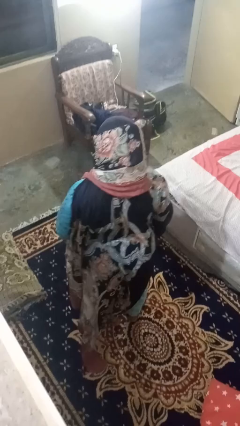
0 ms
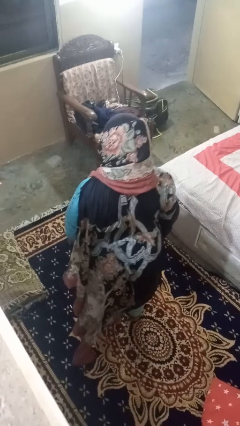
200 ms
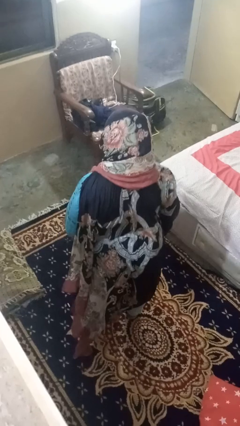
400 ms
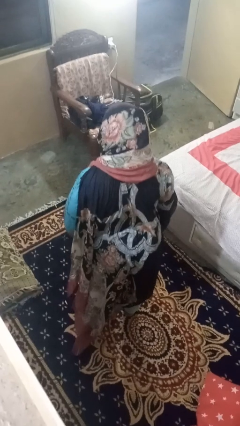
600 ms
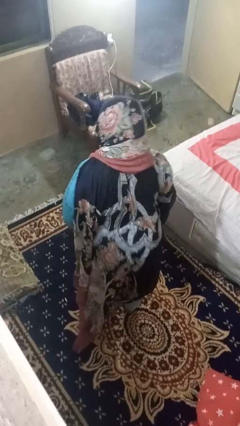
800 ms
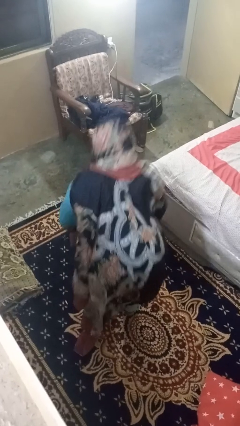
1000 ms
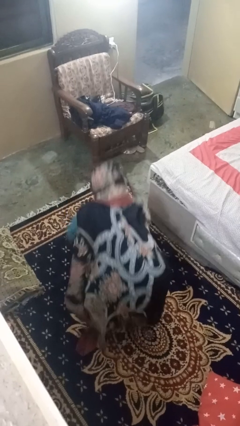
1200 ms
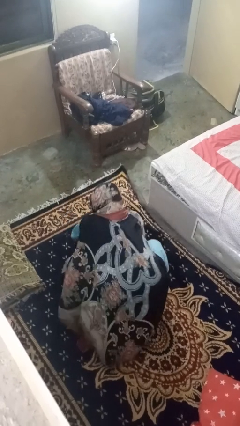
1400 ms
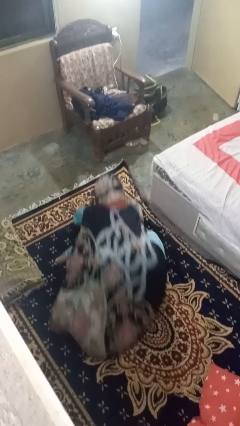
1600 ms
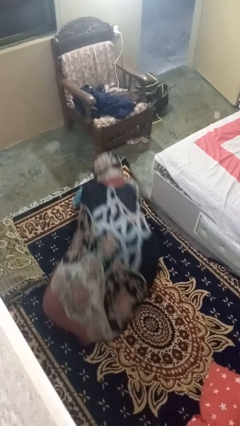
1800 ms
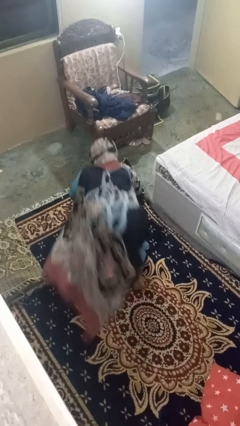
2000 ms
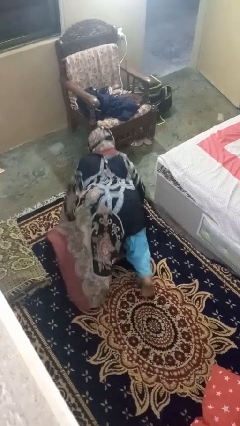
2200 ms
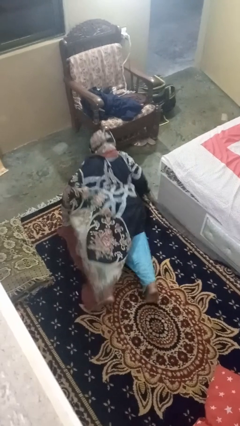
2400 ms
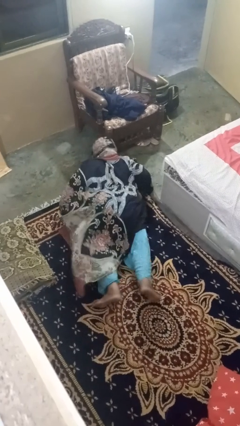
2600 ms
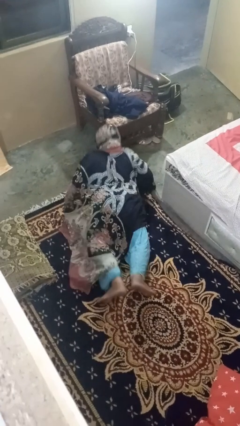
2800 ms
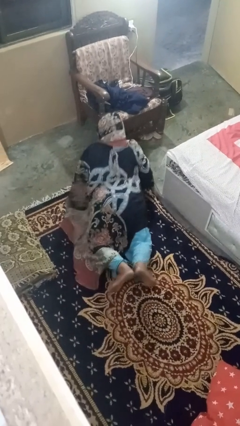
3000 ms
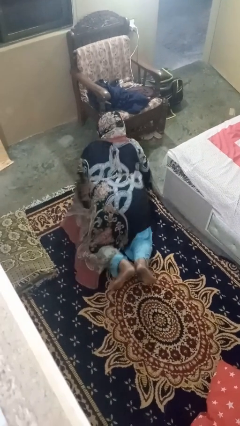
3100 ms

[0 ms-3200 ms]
person exercises with pushup

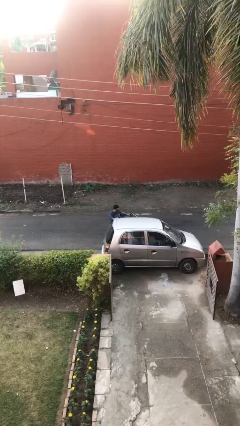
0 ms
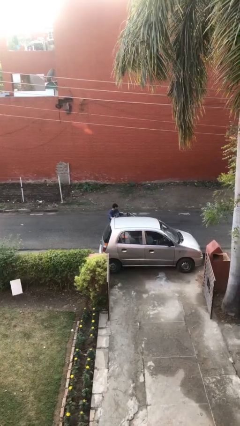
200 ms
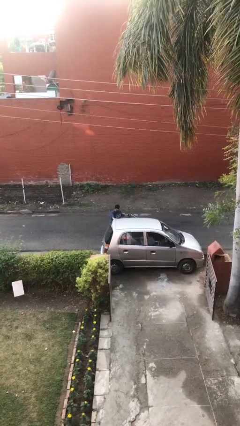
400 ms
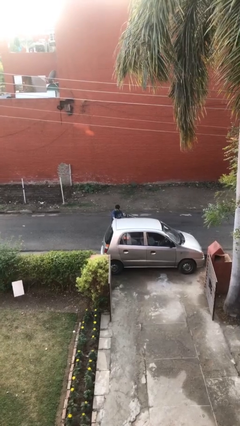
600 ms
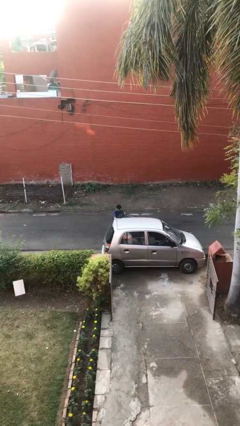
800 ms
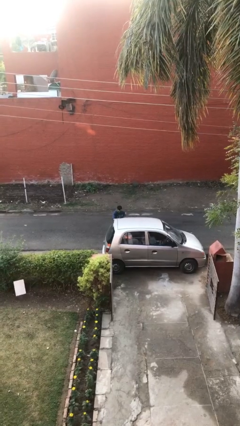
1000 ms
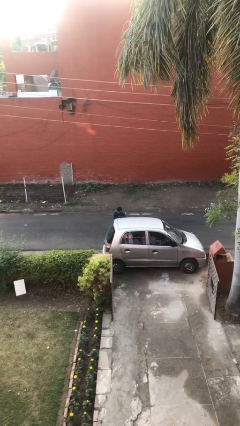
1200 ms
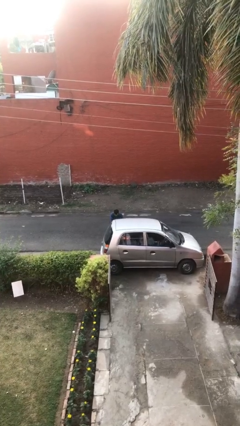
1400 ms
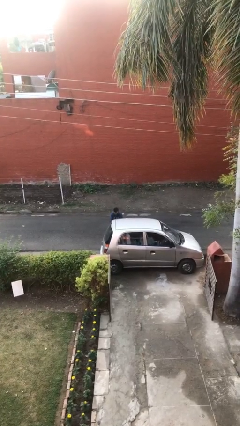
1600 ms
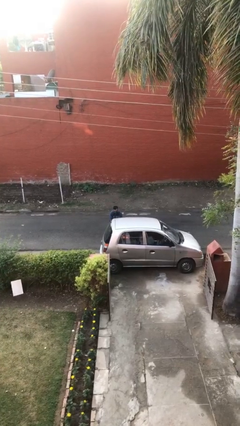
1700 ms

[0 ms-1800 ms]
person closes car door

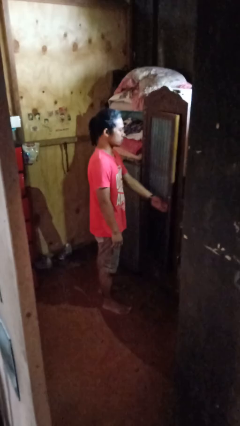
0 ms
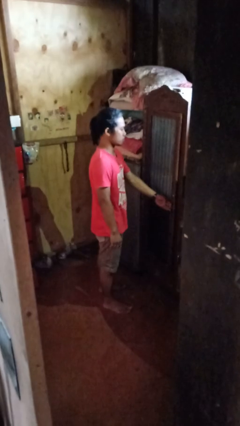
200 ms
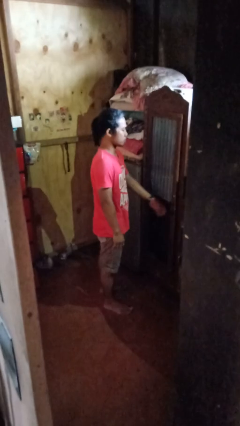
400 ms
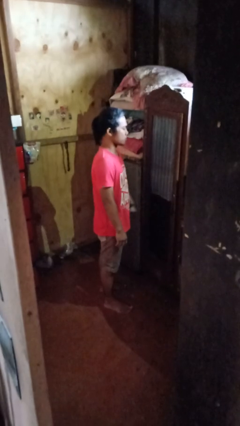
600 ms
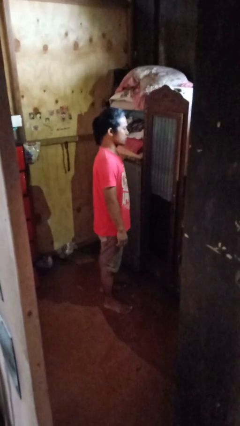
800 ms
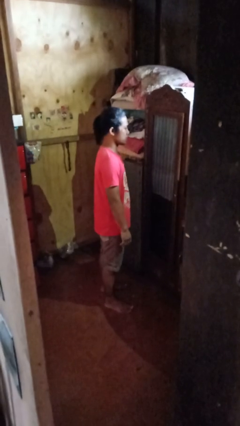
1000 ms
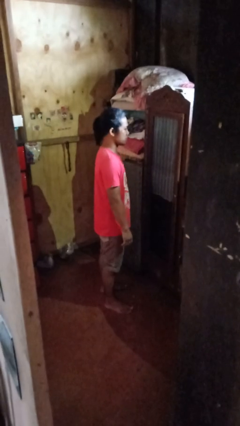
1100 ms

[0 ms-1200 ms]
person closes closet door

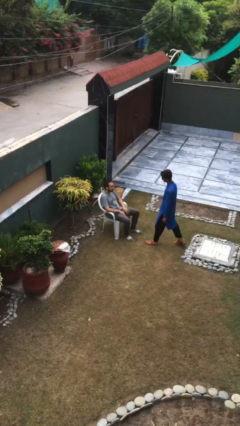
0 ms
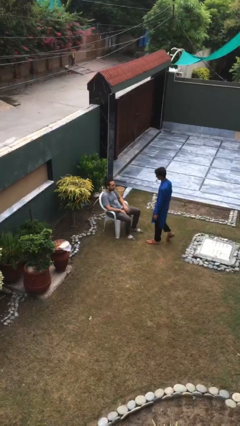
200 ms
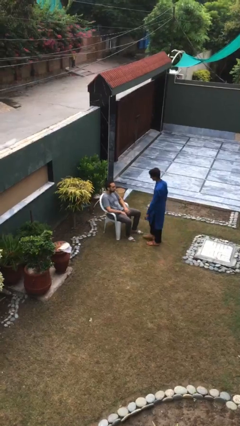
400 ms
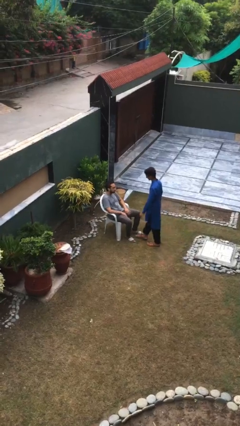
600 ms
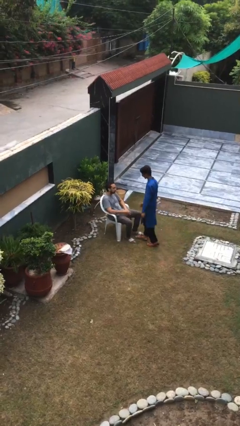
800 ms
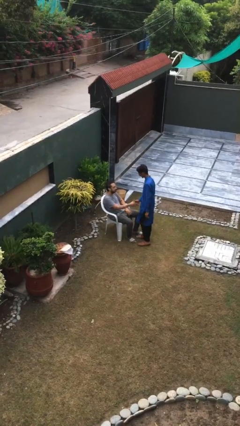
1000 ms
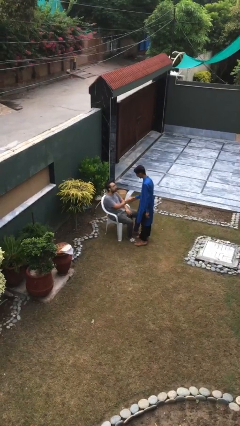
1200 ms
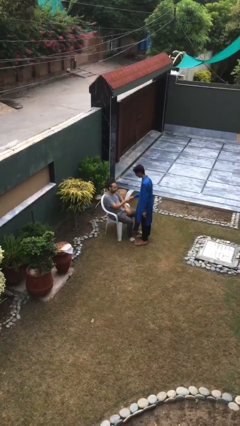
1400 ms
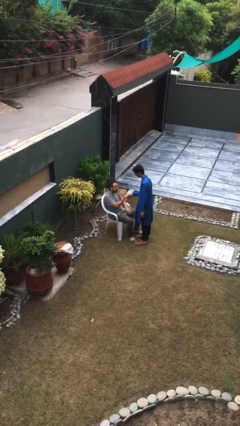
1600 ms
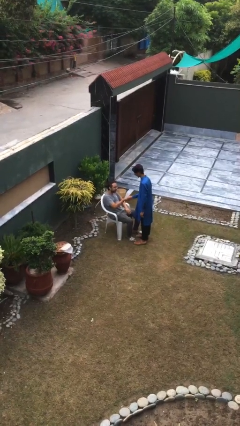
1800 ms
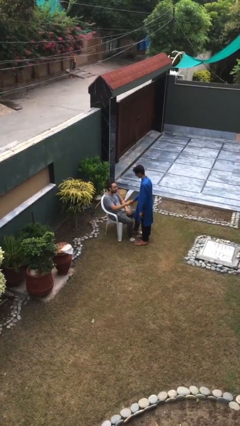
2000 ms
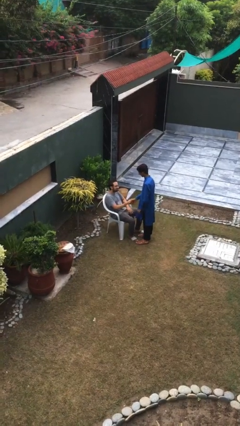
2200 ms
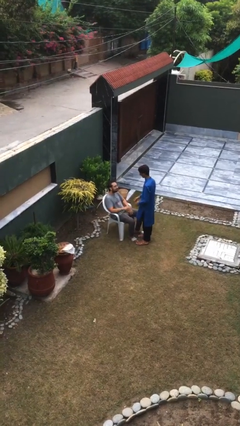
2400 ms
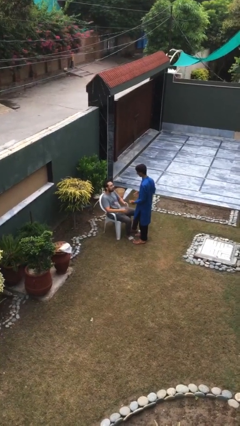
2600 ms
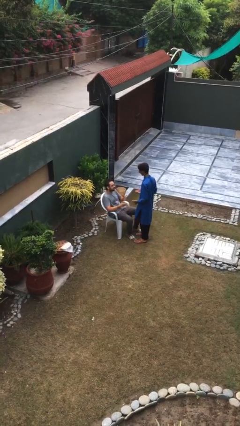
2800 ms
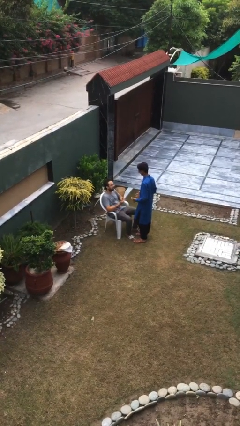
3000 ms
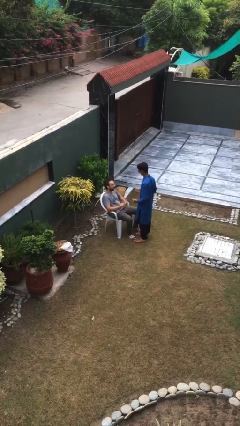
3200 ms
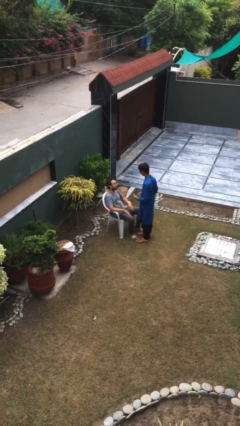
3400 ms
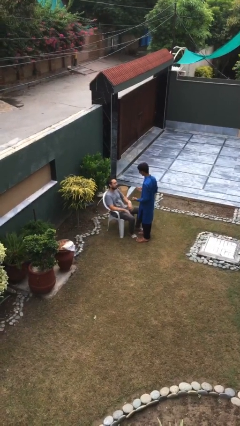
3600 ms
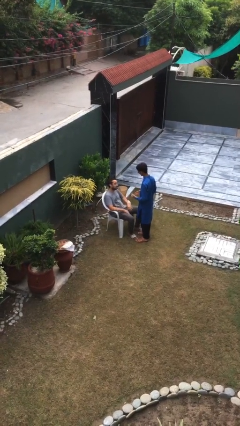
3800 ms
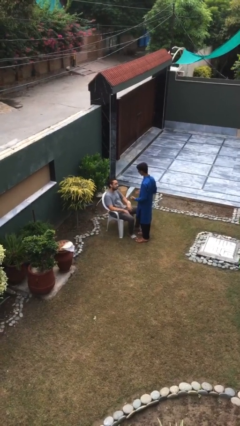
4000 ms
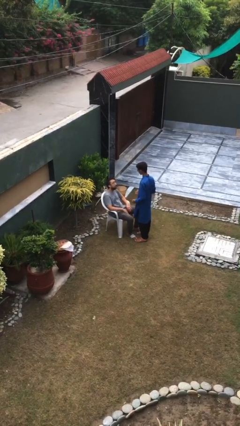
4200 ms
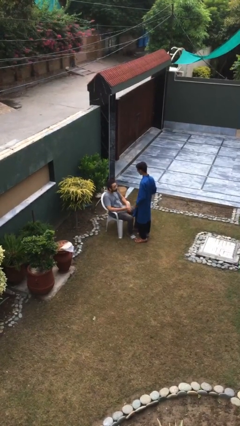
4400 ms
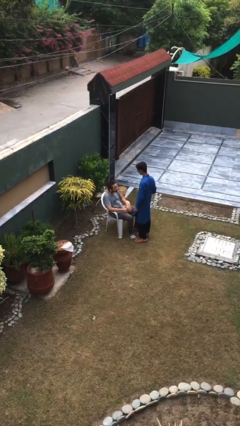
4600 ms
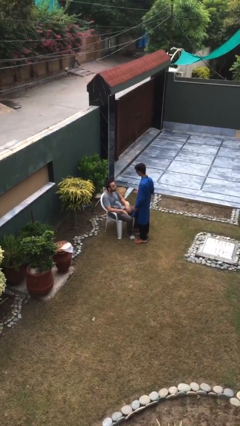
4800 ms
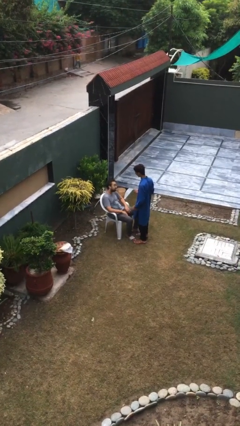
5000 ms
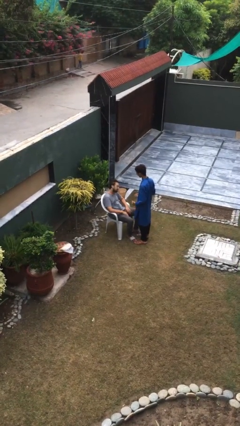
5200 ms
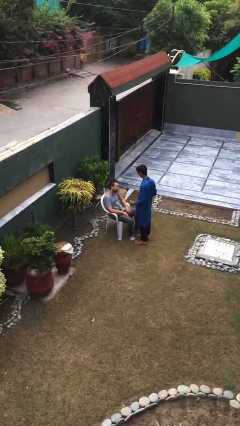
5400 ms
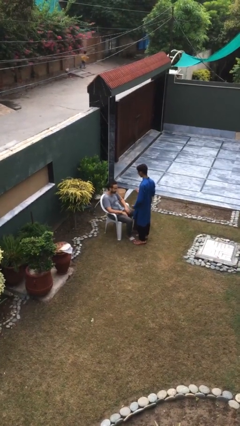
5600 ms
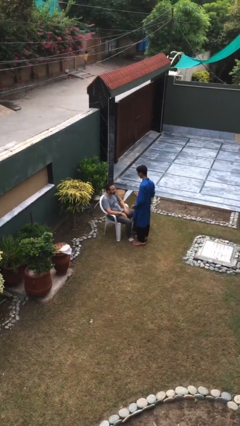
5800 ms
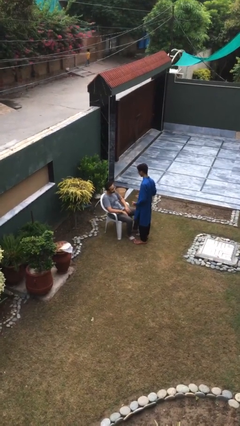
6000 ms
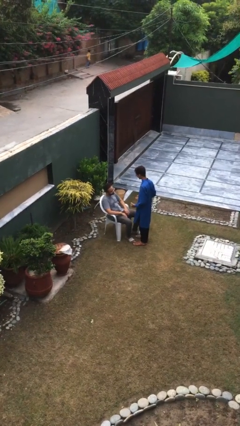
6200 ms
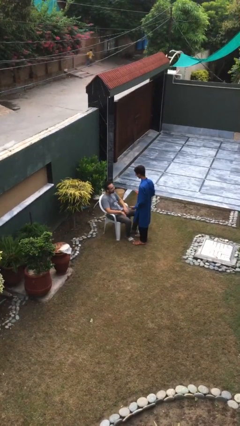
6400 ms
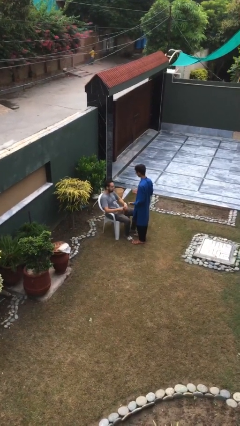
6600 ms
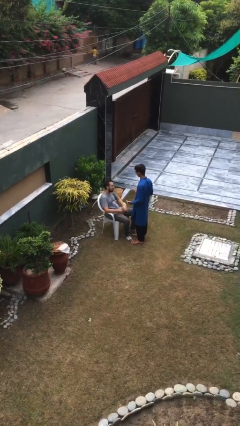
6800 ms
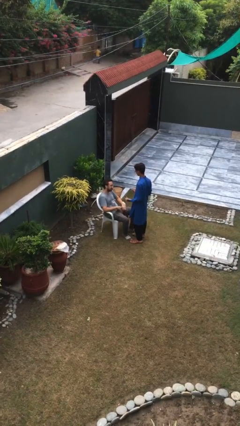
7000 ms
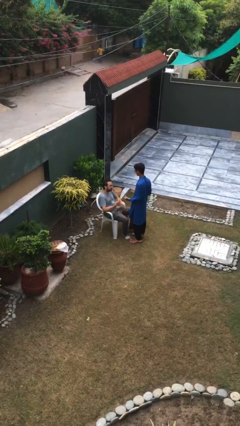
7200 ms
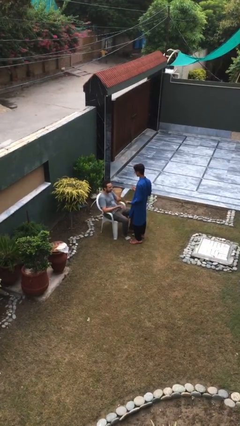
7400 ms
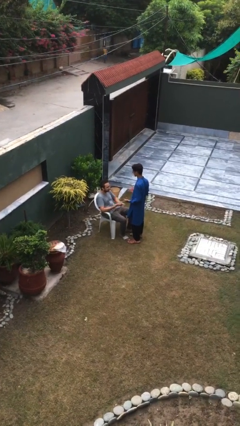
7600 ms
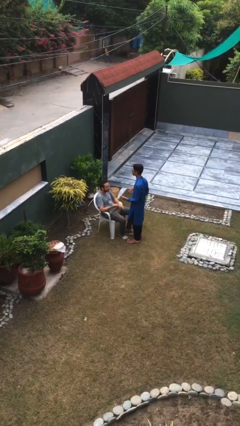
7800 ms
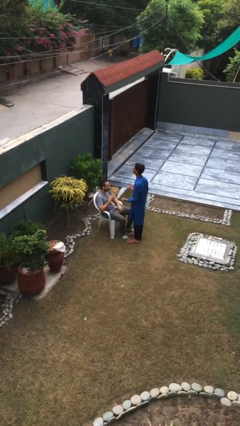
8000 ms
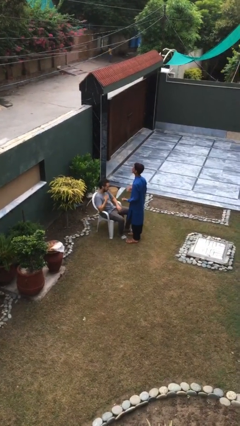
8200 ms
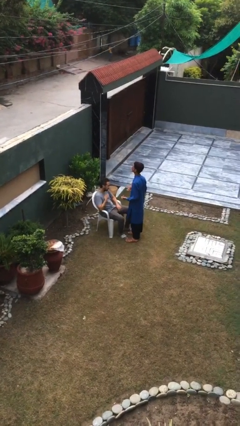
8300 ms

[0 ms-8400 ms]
person shakes hand

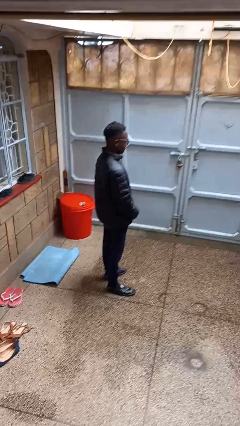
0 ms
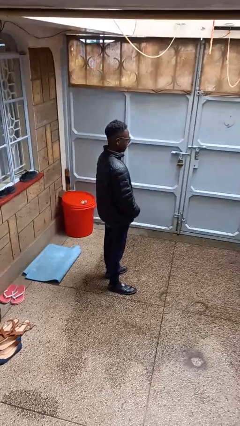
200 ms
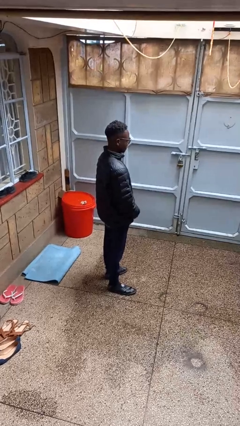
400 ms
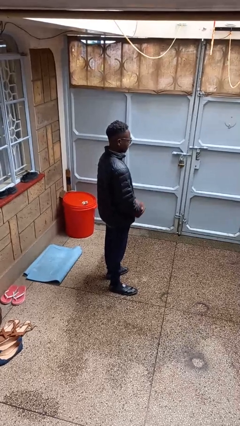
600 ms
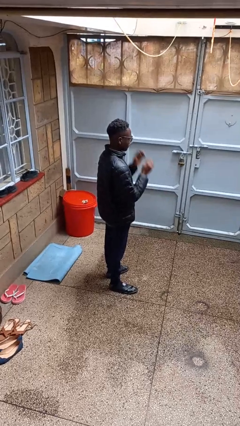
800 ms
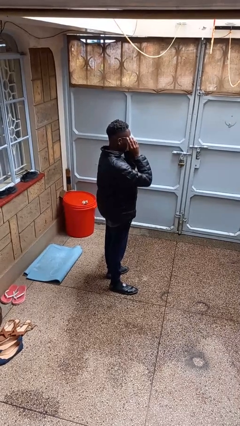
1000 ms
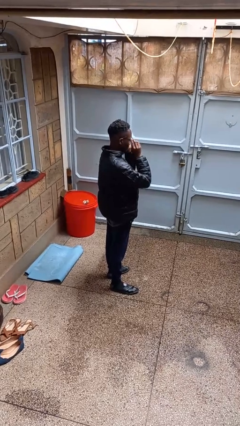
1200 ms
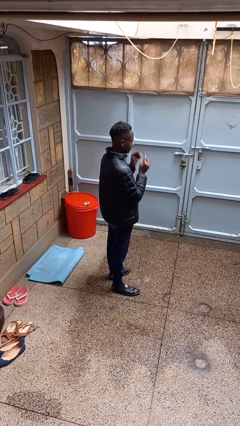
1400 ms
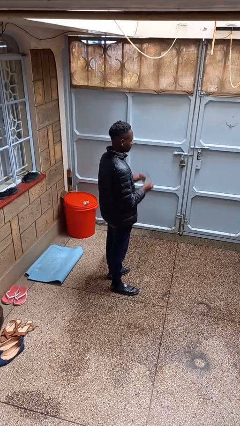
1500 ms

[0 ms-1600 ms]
person takes off glasses

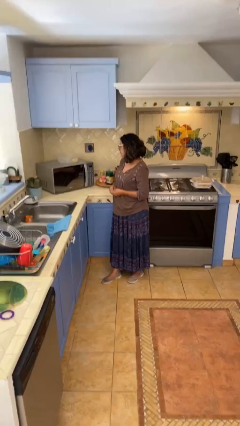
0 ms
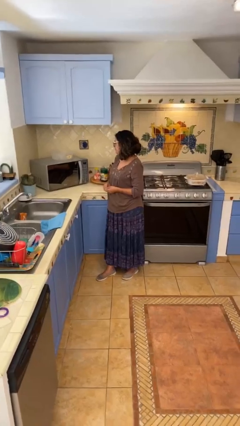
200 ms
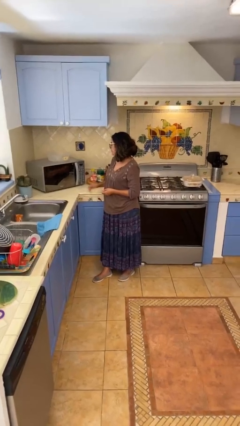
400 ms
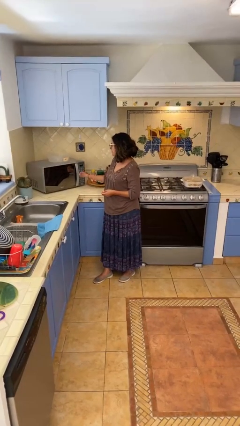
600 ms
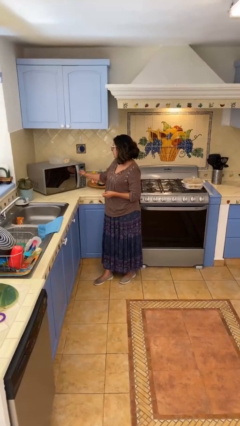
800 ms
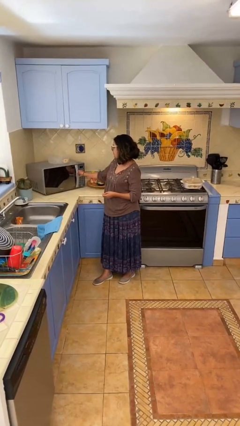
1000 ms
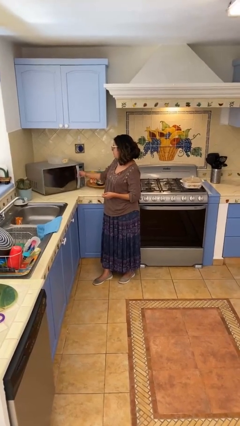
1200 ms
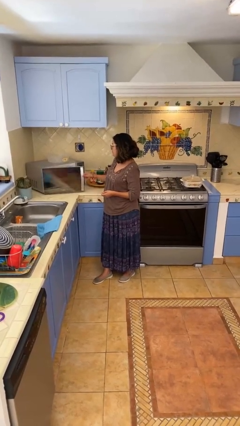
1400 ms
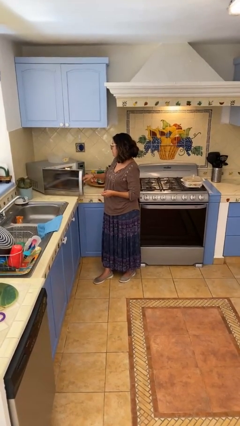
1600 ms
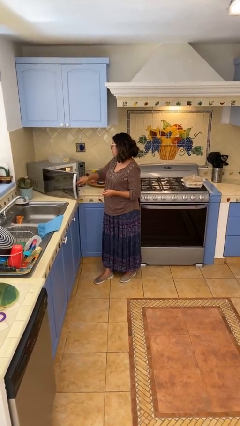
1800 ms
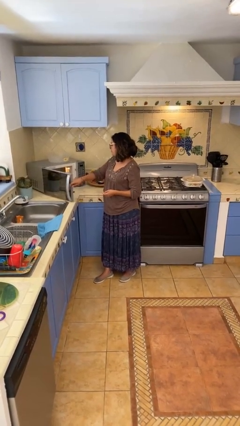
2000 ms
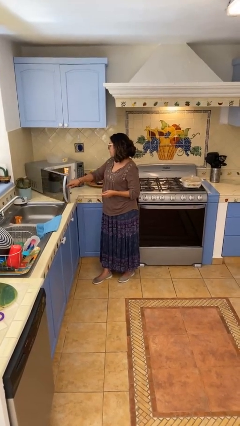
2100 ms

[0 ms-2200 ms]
person opens microwave
